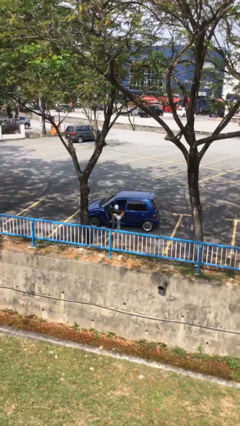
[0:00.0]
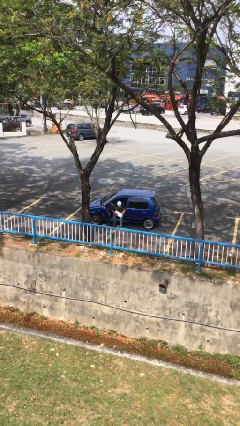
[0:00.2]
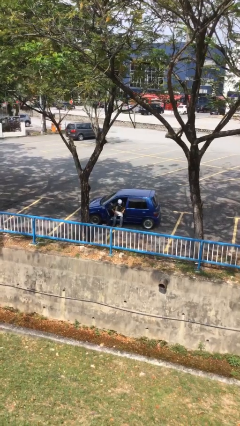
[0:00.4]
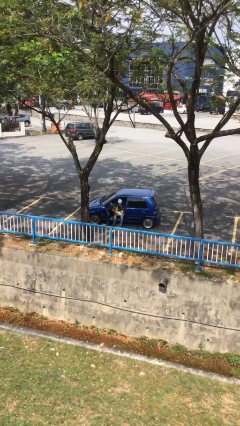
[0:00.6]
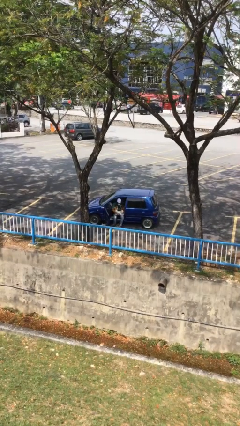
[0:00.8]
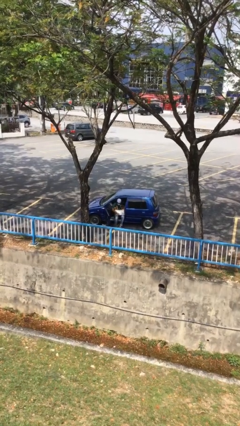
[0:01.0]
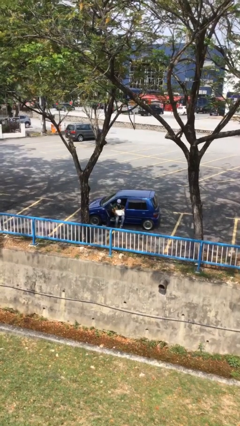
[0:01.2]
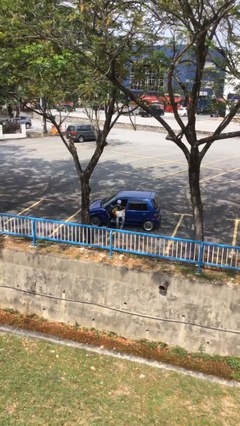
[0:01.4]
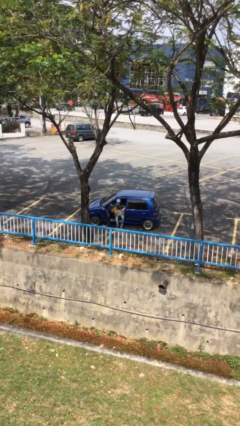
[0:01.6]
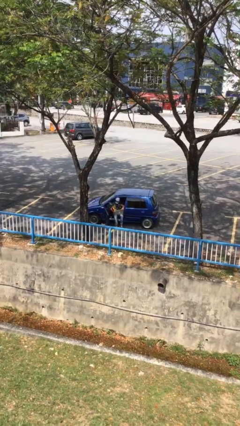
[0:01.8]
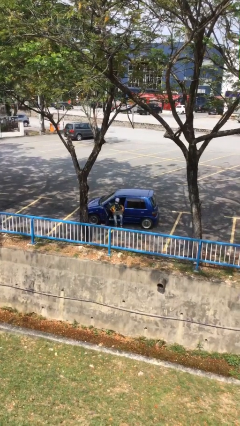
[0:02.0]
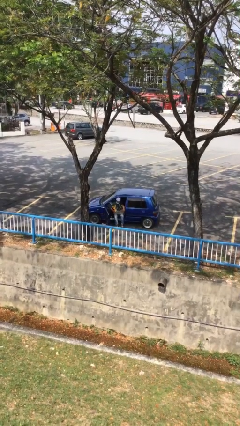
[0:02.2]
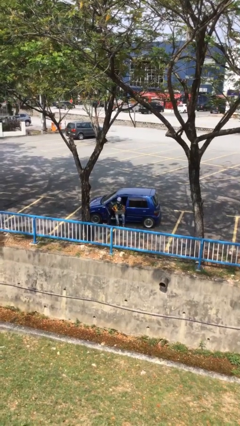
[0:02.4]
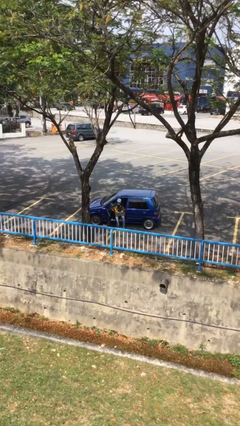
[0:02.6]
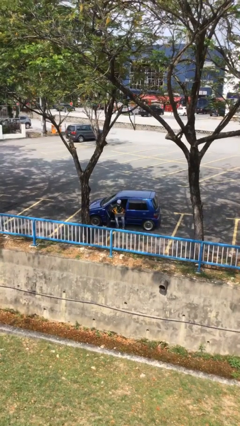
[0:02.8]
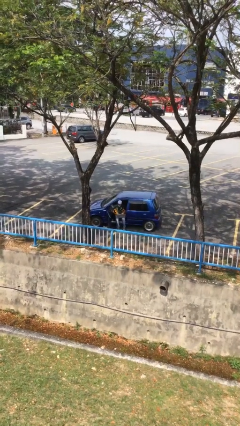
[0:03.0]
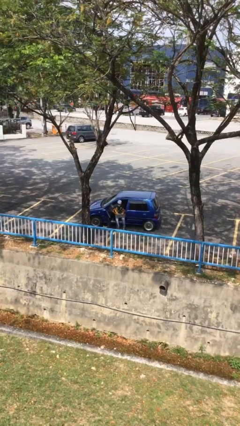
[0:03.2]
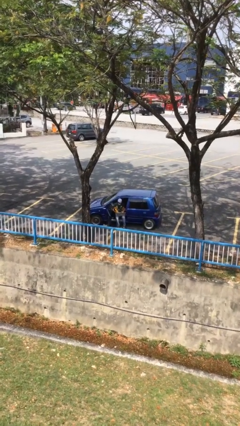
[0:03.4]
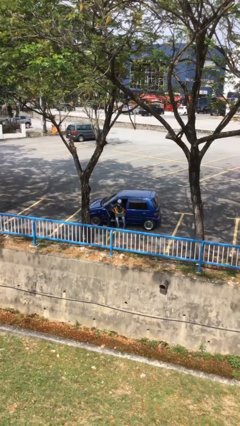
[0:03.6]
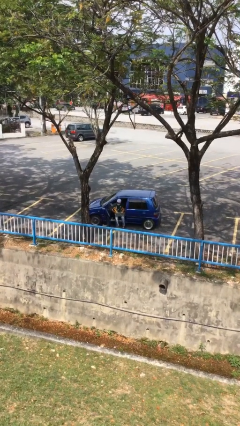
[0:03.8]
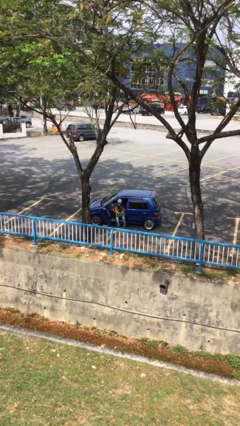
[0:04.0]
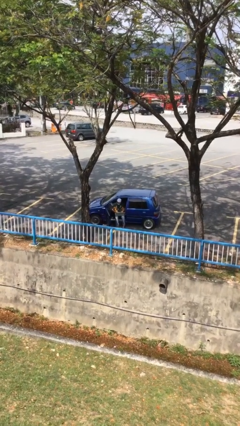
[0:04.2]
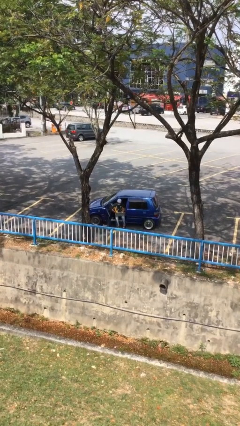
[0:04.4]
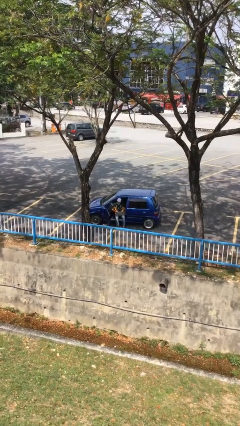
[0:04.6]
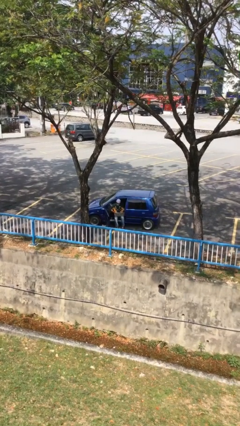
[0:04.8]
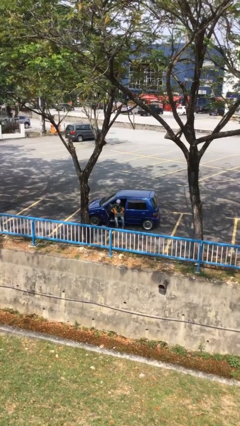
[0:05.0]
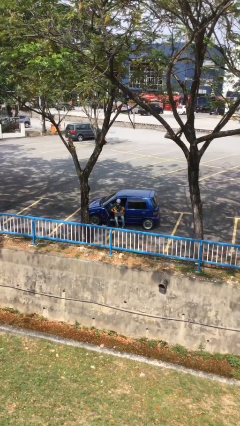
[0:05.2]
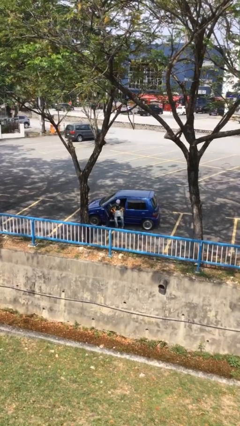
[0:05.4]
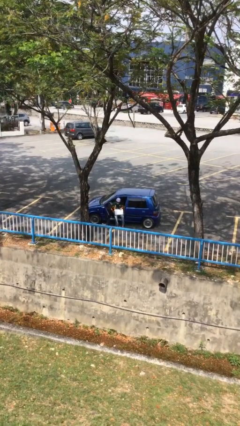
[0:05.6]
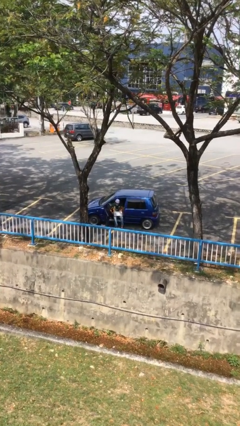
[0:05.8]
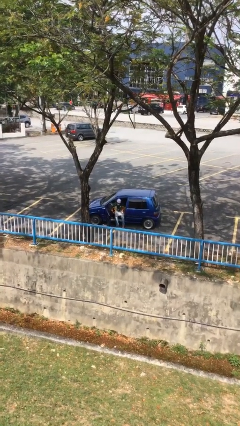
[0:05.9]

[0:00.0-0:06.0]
person interacts with laptop

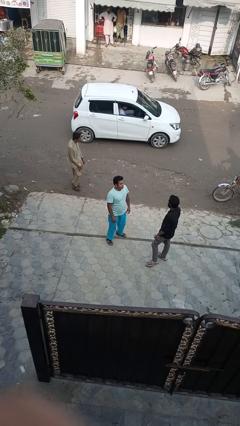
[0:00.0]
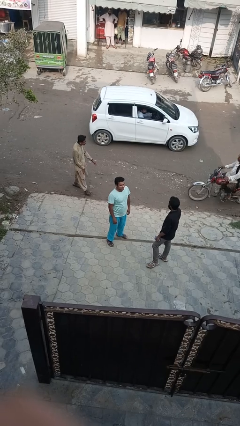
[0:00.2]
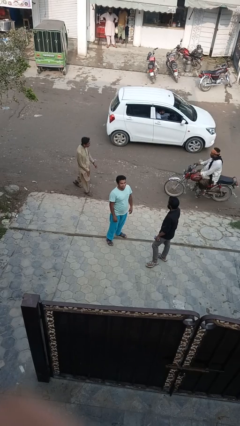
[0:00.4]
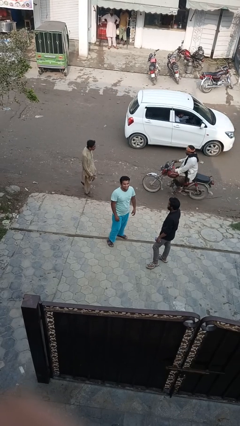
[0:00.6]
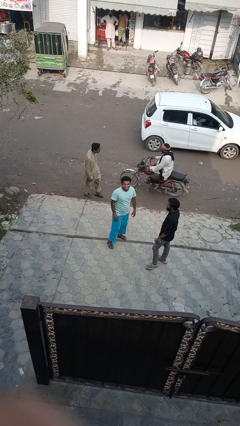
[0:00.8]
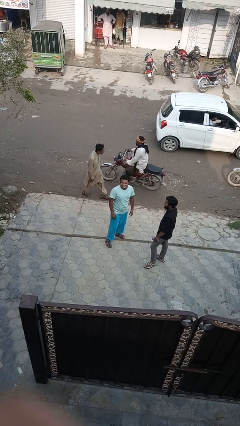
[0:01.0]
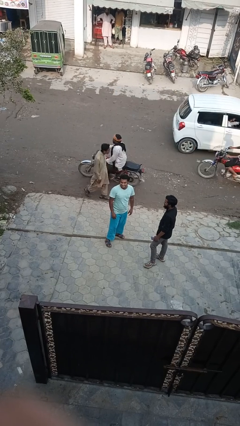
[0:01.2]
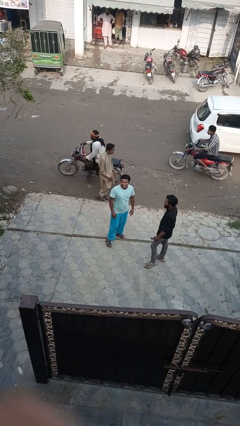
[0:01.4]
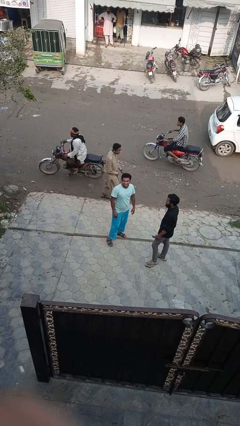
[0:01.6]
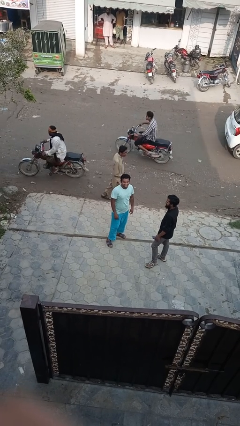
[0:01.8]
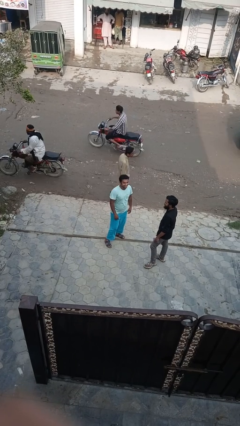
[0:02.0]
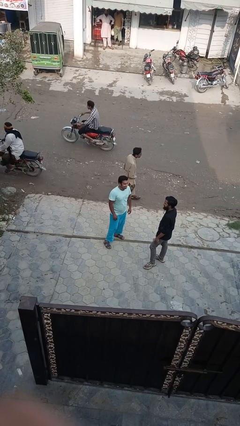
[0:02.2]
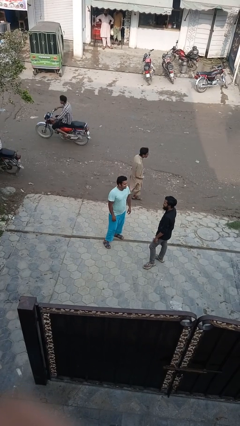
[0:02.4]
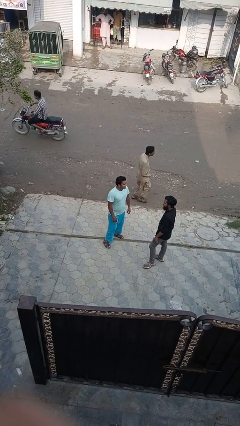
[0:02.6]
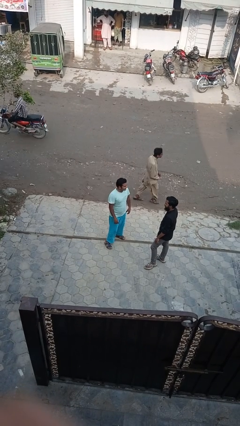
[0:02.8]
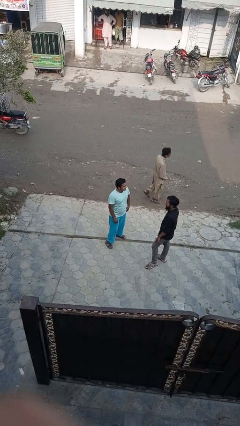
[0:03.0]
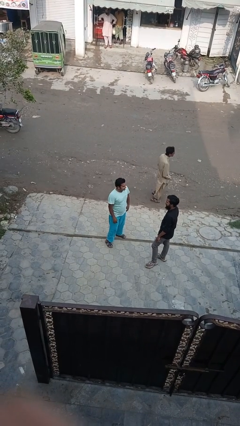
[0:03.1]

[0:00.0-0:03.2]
person laughs with person

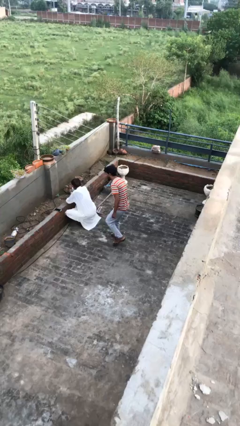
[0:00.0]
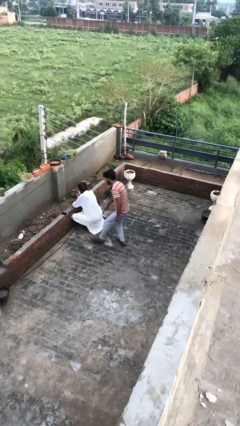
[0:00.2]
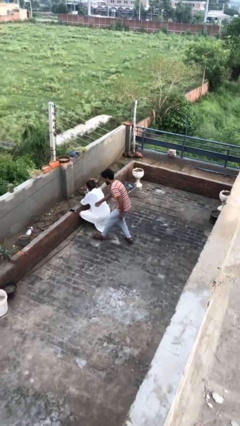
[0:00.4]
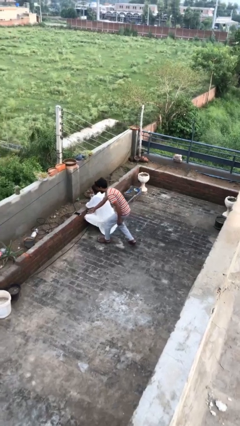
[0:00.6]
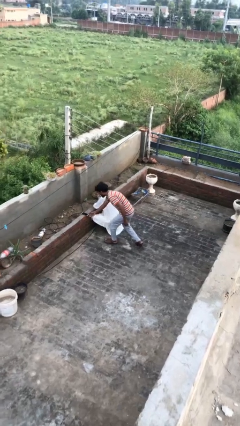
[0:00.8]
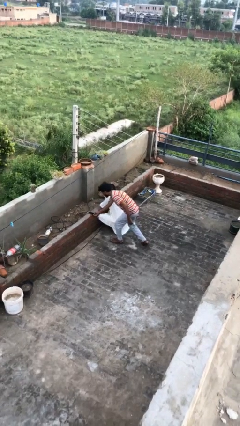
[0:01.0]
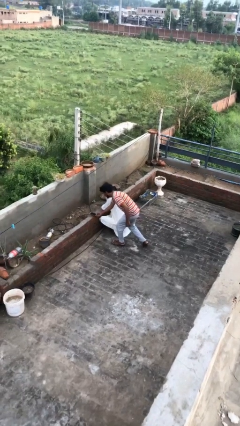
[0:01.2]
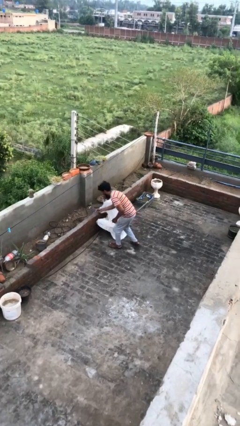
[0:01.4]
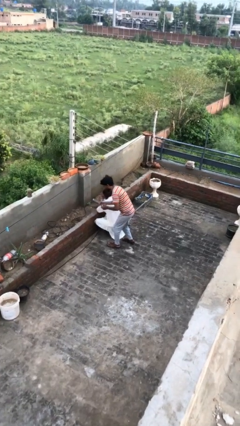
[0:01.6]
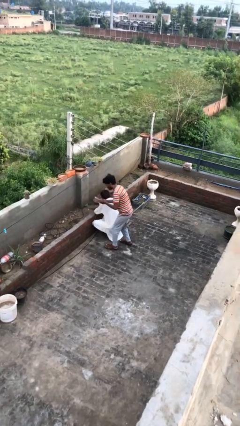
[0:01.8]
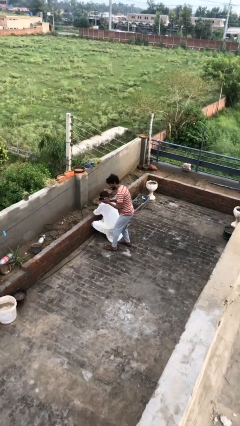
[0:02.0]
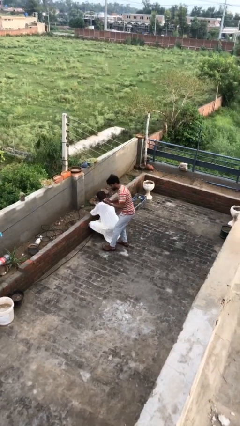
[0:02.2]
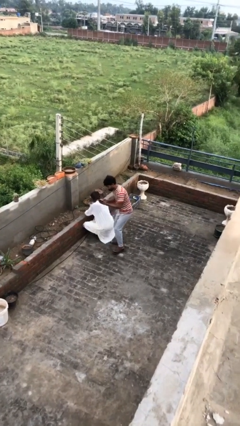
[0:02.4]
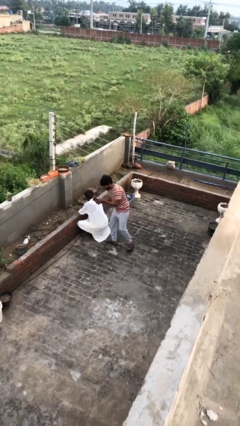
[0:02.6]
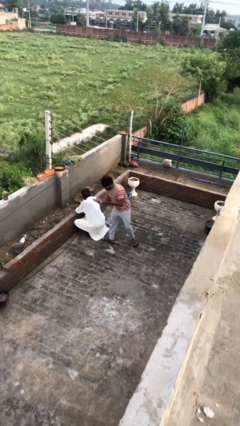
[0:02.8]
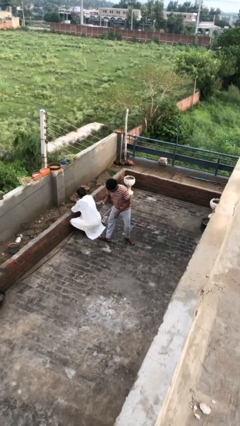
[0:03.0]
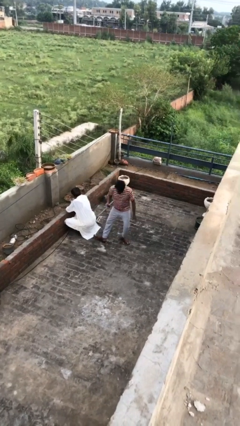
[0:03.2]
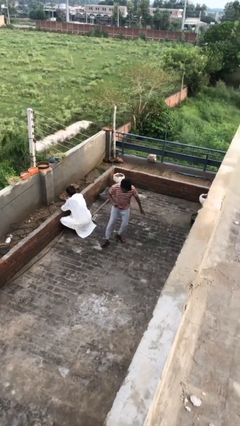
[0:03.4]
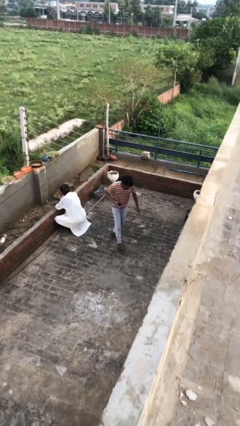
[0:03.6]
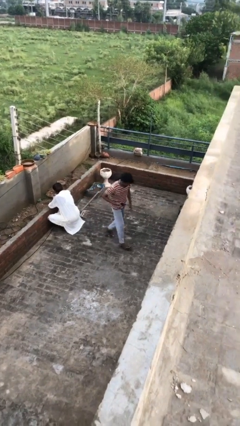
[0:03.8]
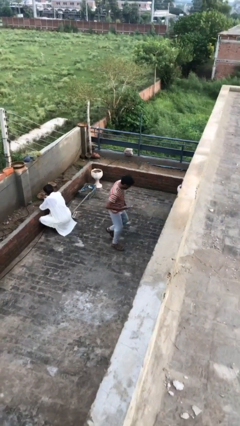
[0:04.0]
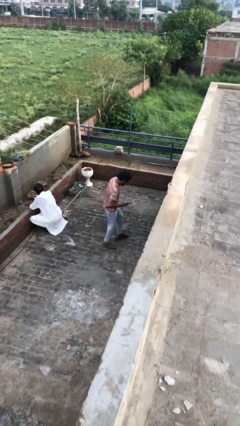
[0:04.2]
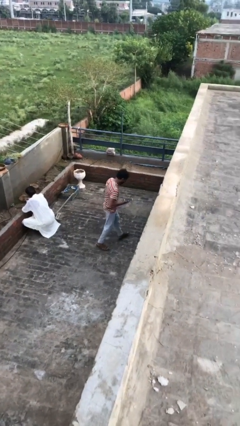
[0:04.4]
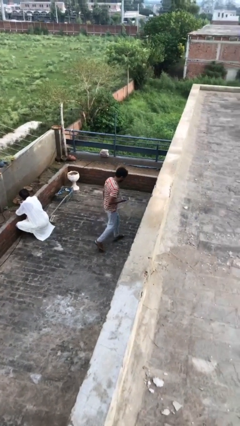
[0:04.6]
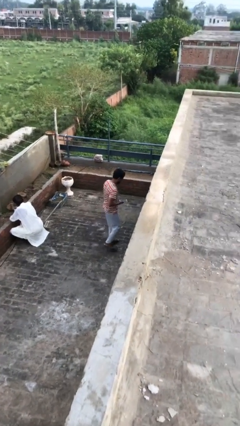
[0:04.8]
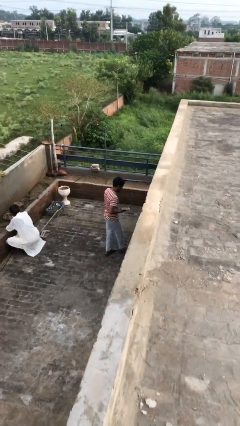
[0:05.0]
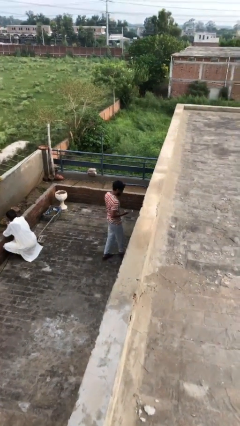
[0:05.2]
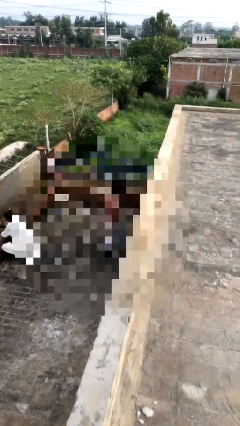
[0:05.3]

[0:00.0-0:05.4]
person steals object from person

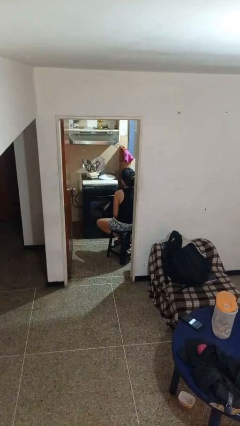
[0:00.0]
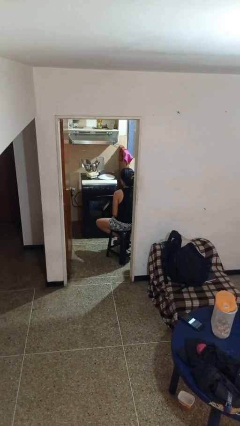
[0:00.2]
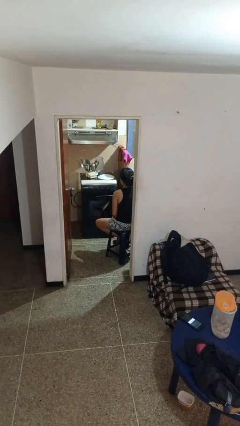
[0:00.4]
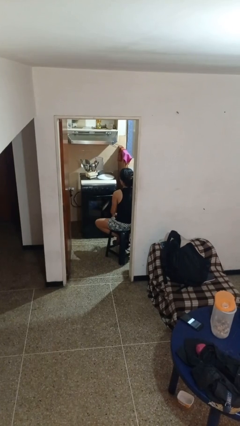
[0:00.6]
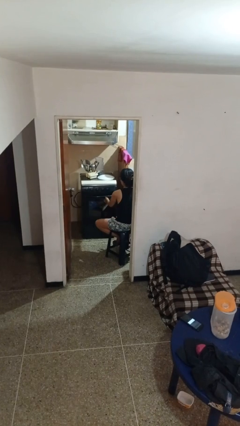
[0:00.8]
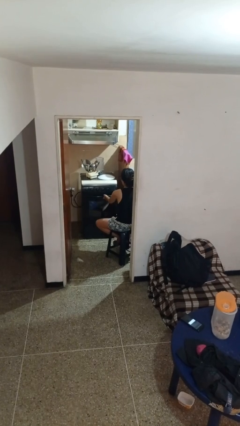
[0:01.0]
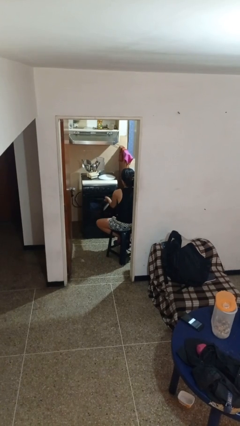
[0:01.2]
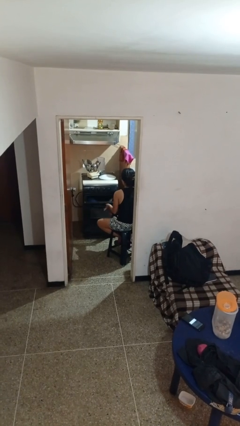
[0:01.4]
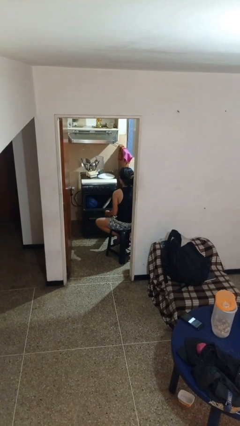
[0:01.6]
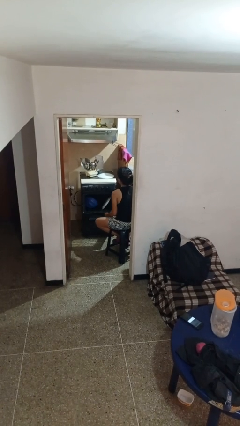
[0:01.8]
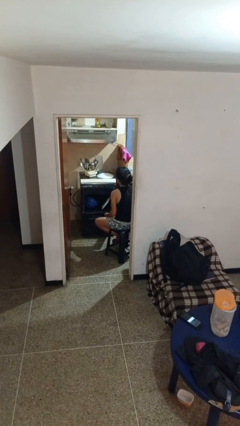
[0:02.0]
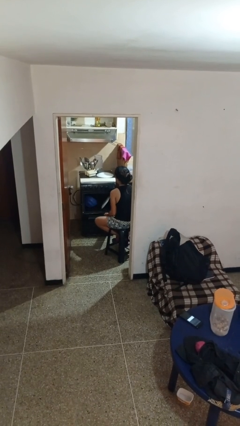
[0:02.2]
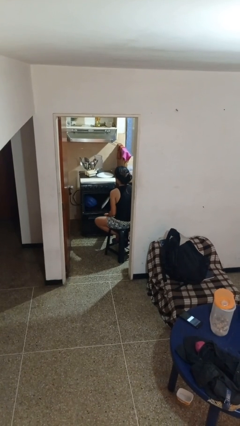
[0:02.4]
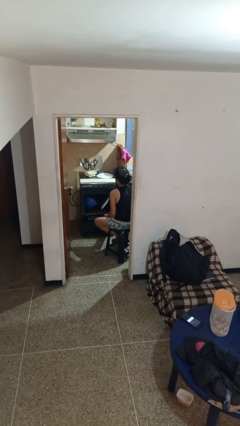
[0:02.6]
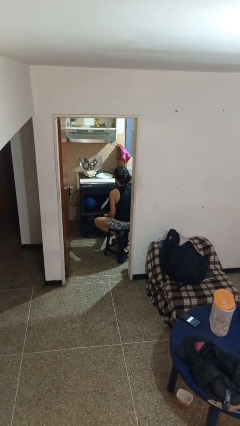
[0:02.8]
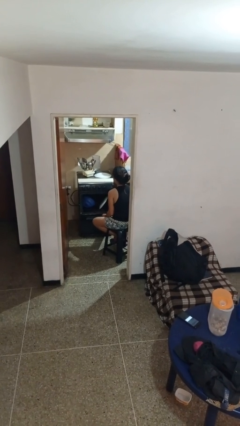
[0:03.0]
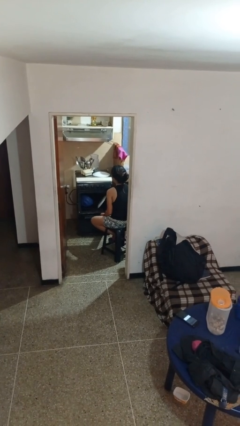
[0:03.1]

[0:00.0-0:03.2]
person opens dishwasher
